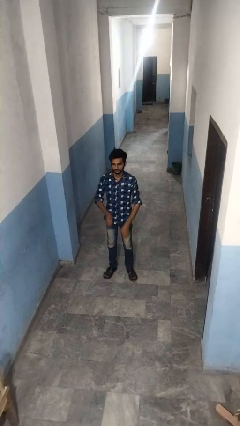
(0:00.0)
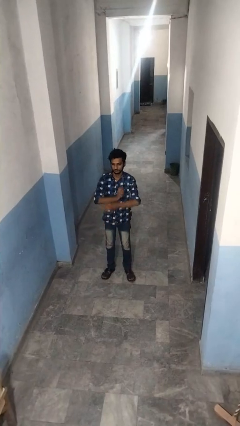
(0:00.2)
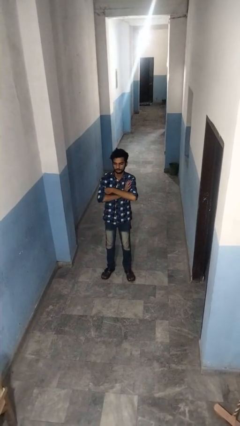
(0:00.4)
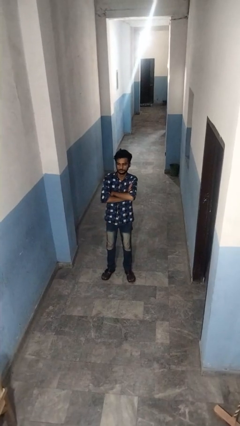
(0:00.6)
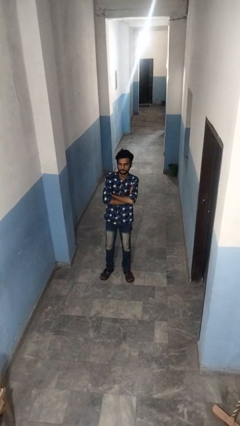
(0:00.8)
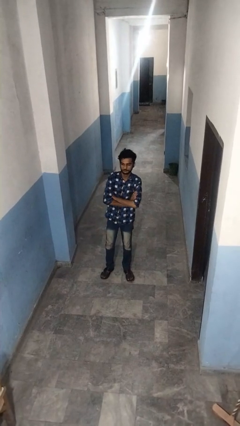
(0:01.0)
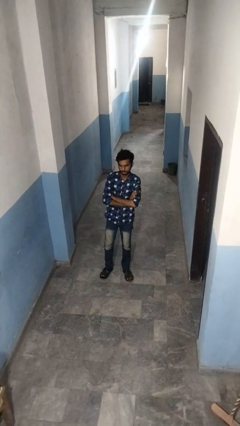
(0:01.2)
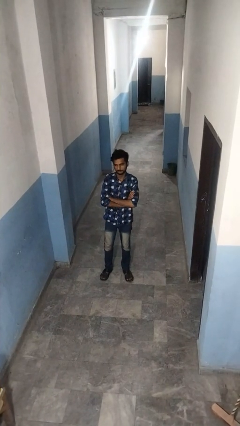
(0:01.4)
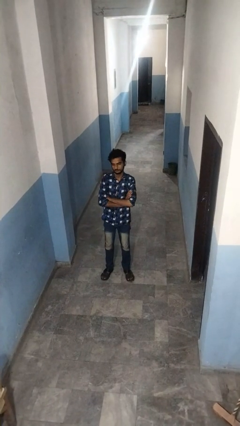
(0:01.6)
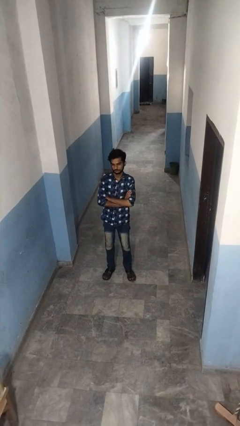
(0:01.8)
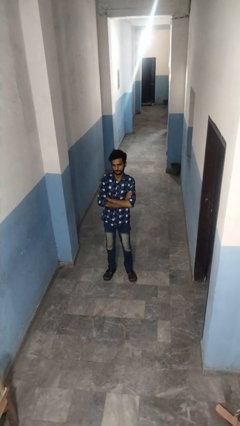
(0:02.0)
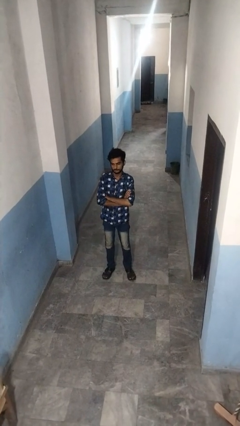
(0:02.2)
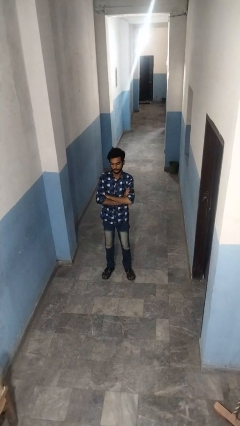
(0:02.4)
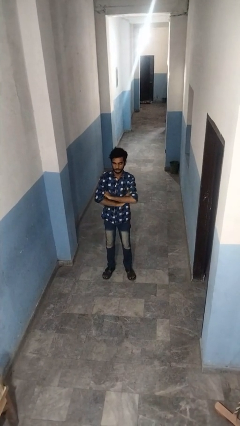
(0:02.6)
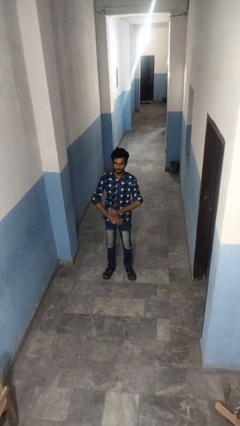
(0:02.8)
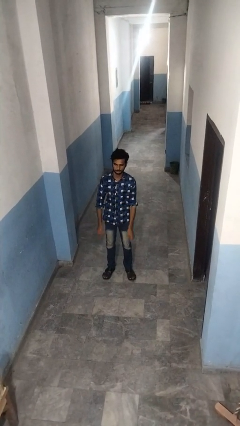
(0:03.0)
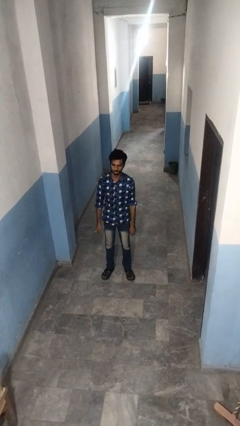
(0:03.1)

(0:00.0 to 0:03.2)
person crosses arms

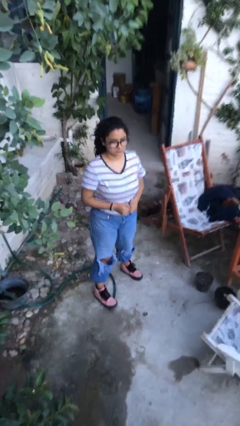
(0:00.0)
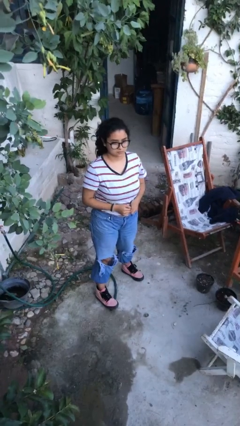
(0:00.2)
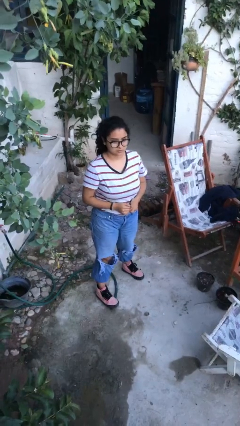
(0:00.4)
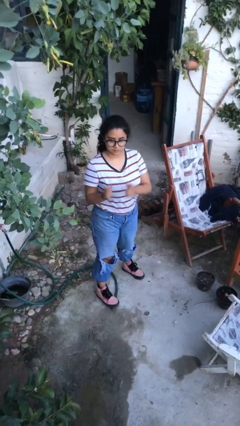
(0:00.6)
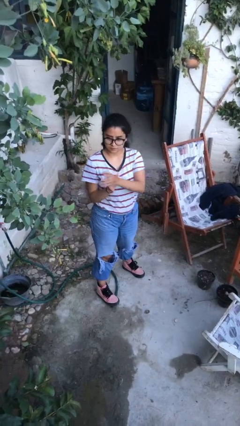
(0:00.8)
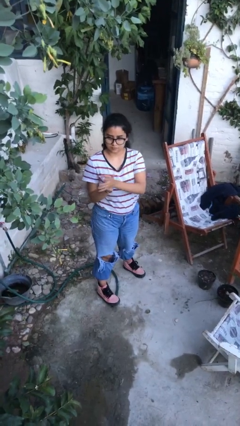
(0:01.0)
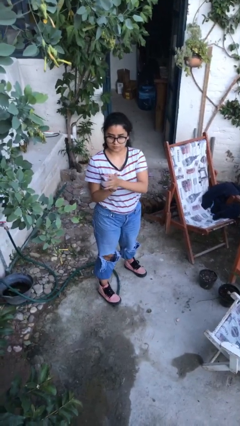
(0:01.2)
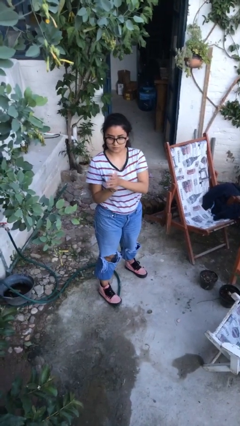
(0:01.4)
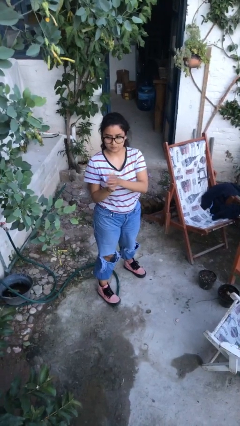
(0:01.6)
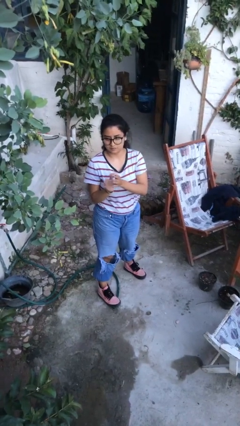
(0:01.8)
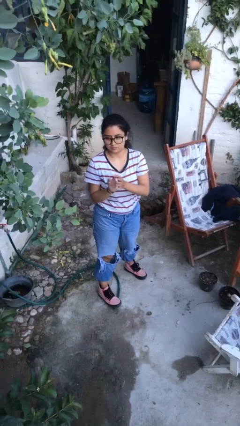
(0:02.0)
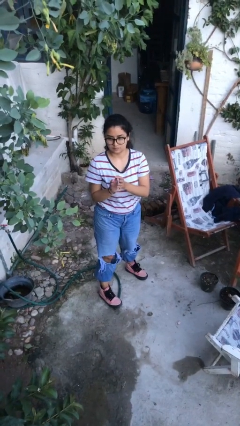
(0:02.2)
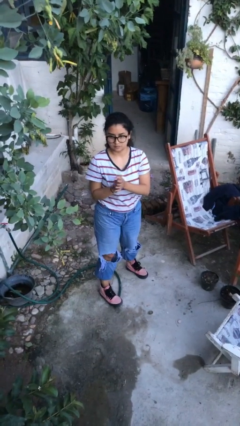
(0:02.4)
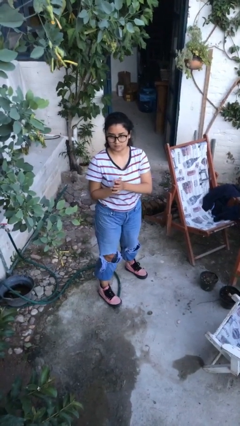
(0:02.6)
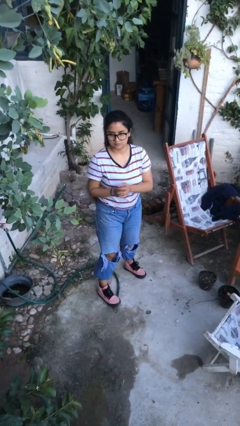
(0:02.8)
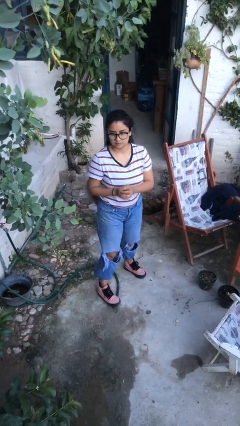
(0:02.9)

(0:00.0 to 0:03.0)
person claps hands

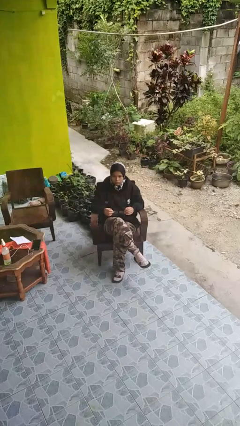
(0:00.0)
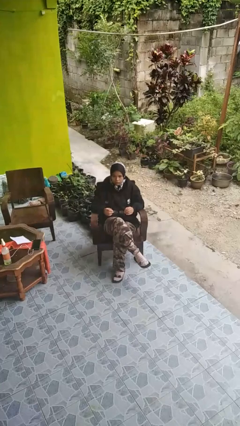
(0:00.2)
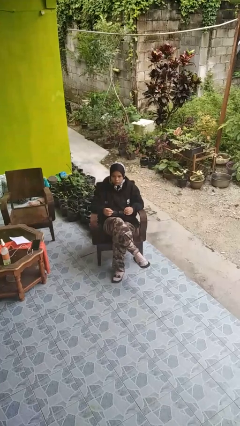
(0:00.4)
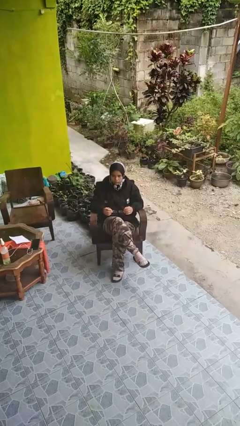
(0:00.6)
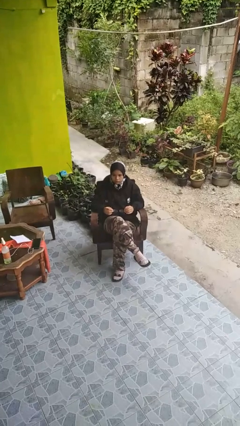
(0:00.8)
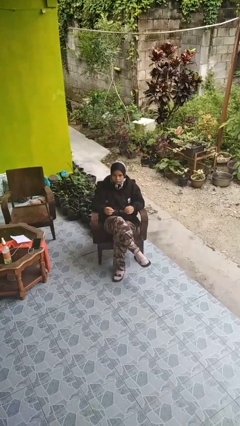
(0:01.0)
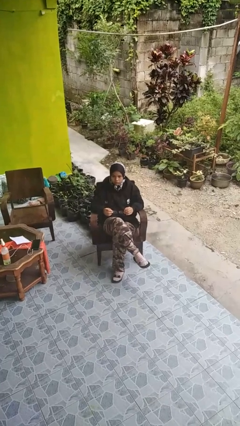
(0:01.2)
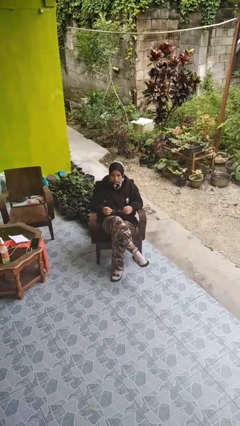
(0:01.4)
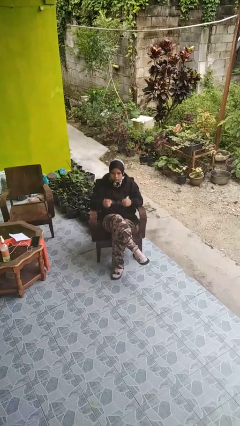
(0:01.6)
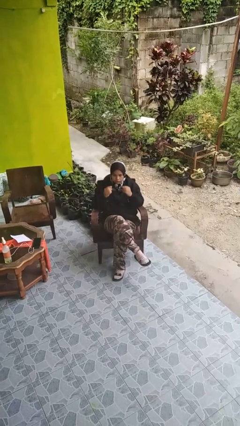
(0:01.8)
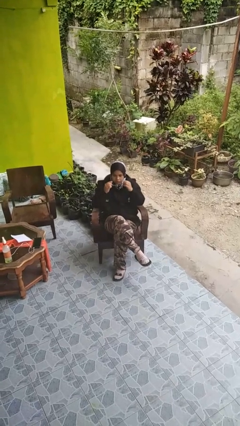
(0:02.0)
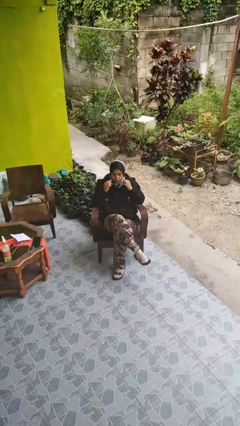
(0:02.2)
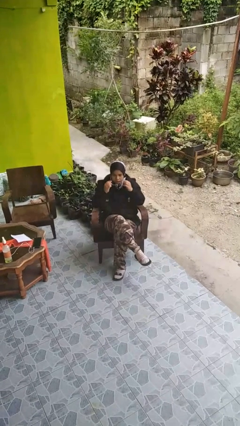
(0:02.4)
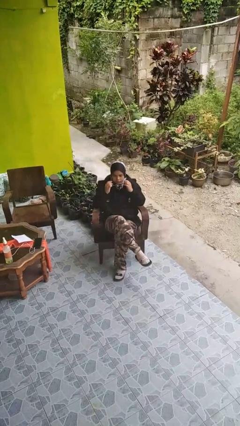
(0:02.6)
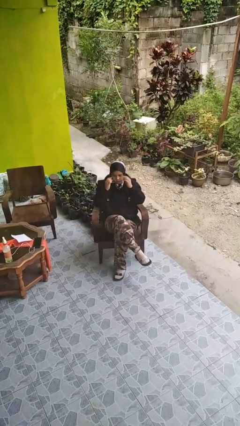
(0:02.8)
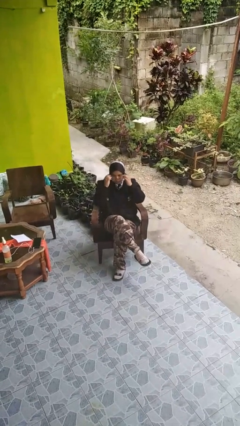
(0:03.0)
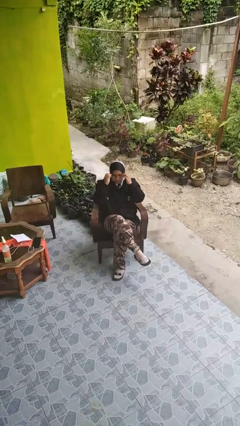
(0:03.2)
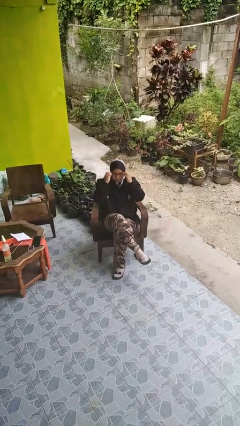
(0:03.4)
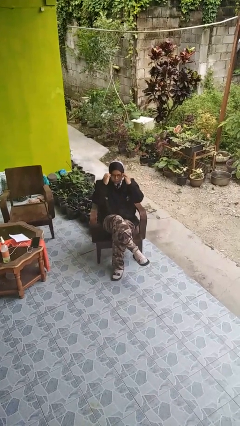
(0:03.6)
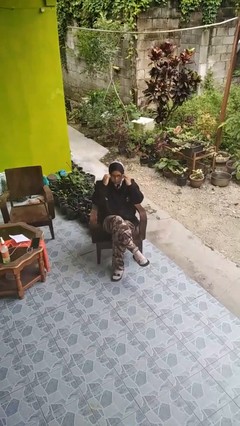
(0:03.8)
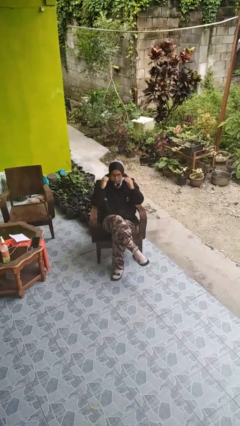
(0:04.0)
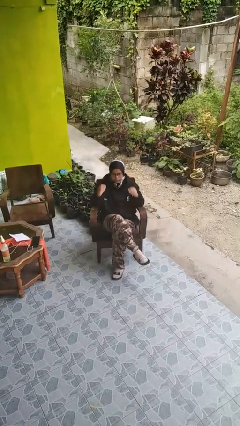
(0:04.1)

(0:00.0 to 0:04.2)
person puts on glasses

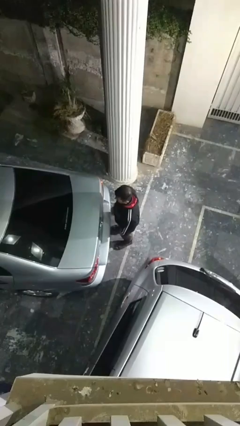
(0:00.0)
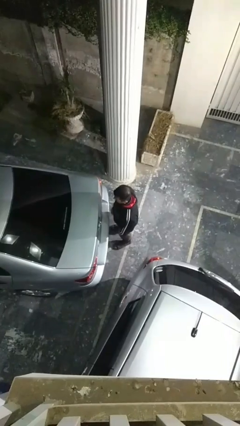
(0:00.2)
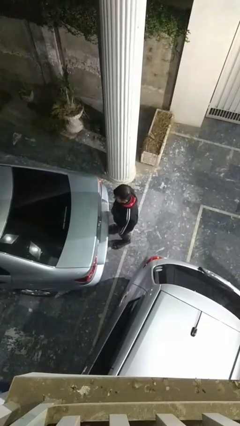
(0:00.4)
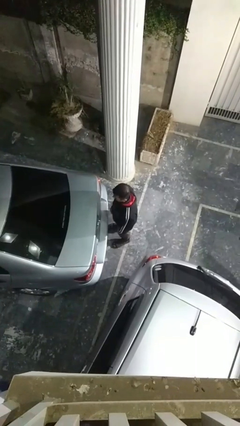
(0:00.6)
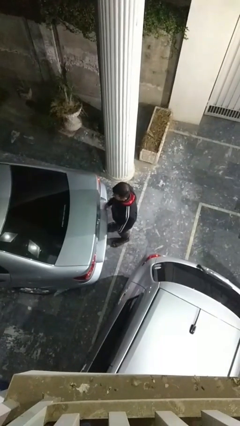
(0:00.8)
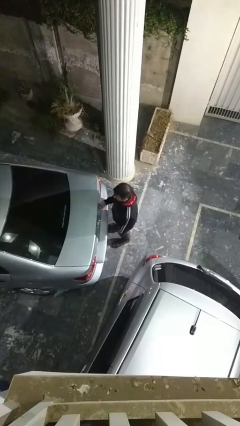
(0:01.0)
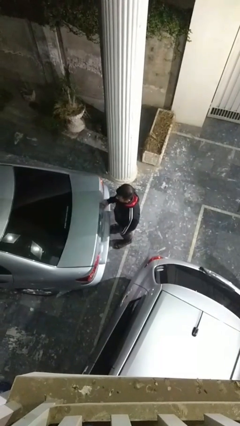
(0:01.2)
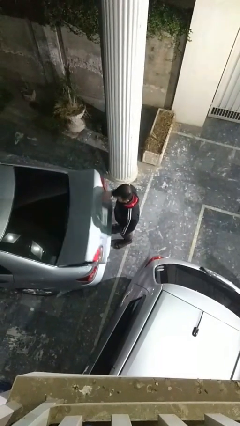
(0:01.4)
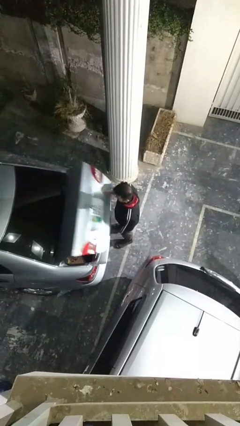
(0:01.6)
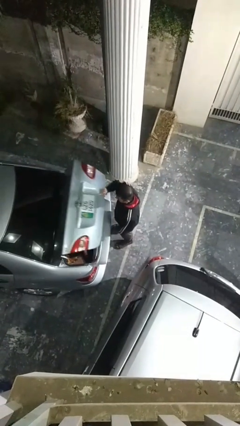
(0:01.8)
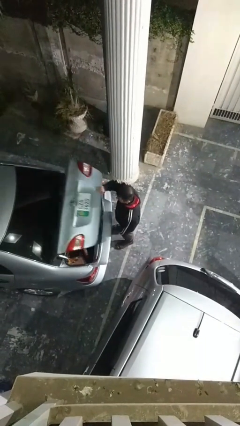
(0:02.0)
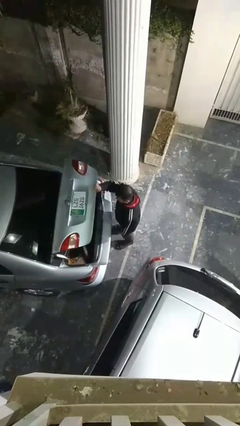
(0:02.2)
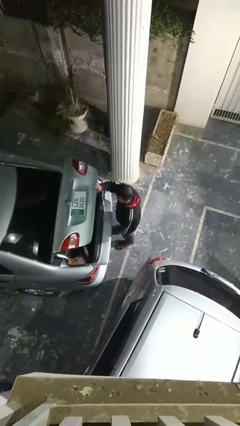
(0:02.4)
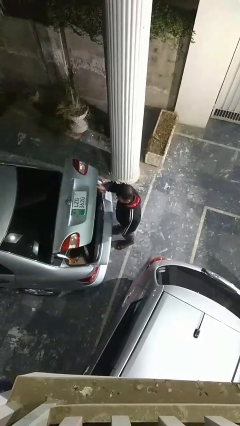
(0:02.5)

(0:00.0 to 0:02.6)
person opens car trunk

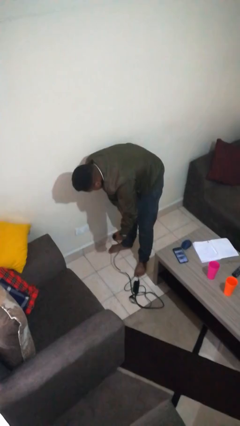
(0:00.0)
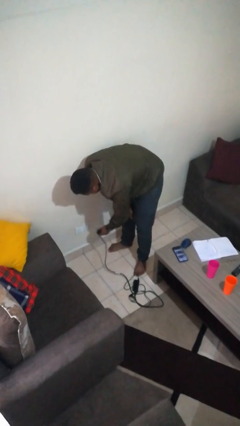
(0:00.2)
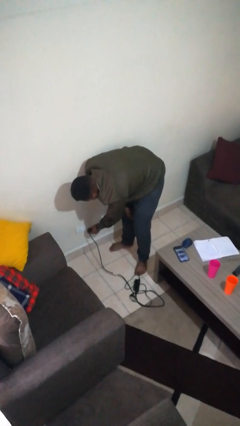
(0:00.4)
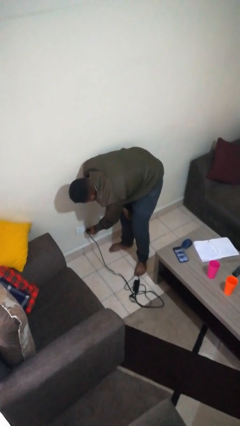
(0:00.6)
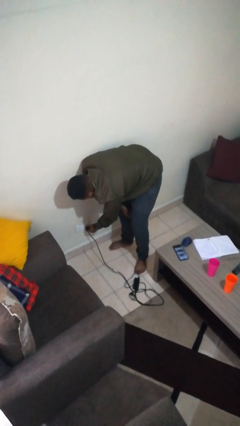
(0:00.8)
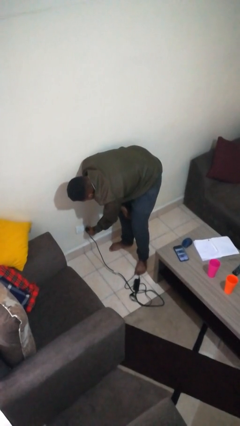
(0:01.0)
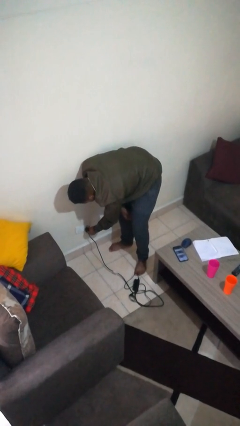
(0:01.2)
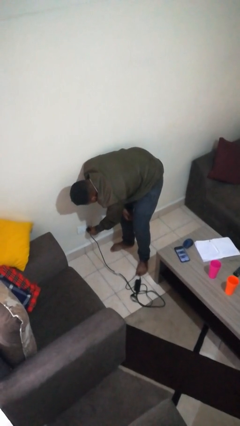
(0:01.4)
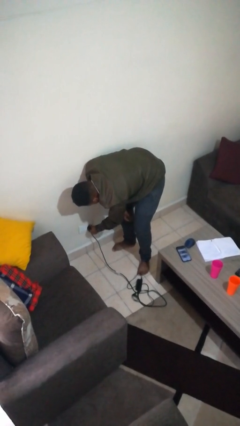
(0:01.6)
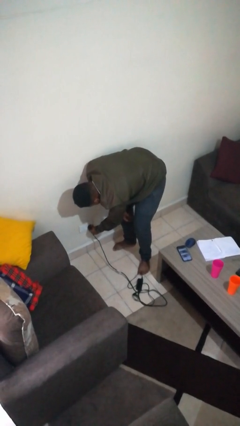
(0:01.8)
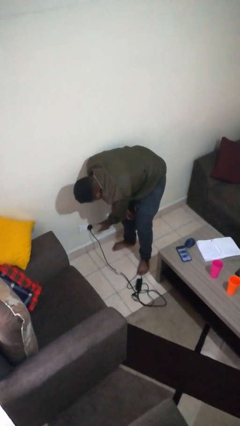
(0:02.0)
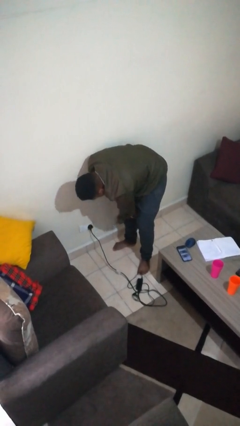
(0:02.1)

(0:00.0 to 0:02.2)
person plugs into electrical socket

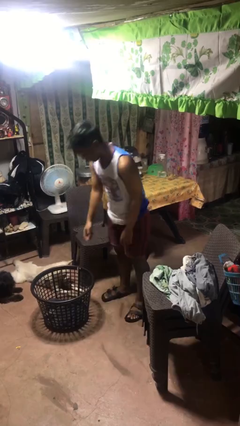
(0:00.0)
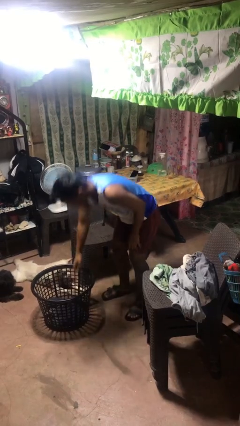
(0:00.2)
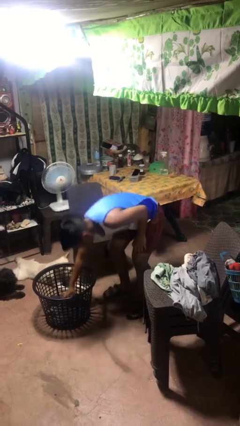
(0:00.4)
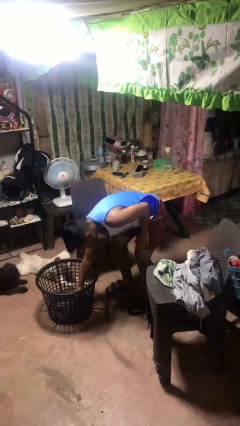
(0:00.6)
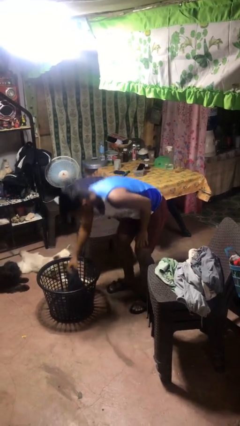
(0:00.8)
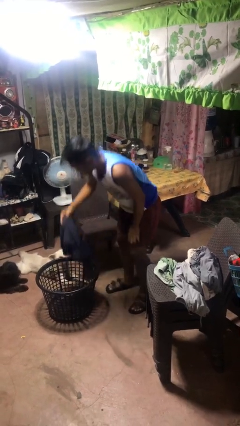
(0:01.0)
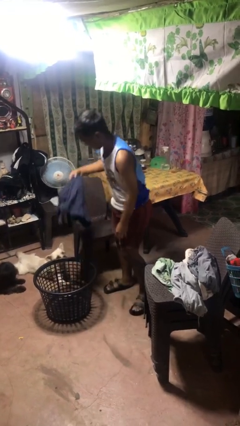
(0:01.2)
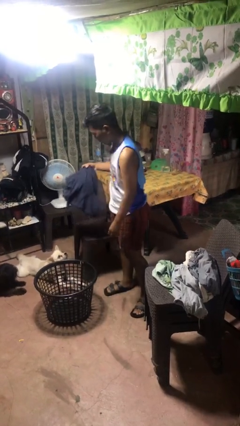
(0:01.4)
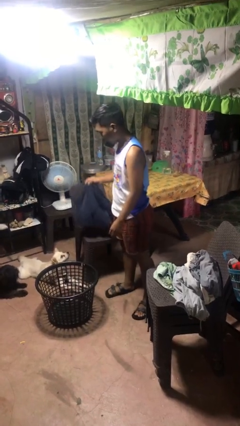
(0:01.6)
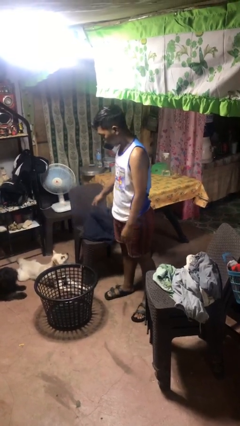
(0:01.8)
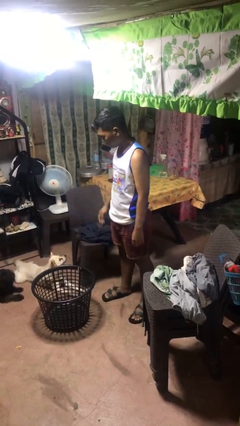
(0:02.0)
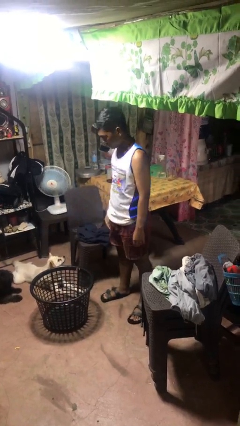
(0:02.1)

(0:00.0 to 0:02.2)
person takes object from basket

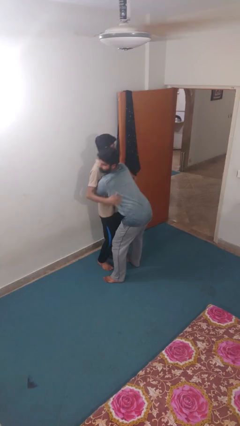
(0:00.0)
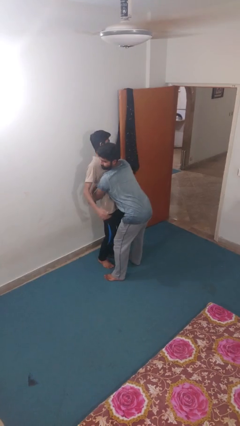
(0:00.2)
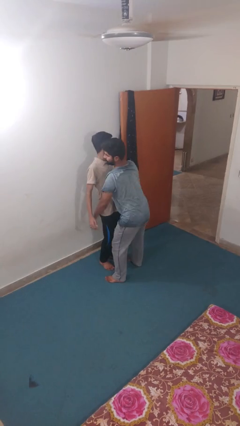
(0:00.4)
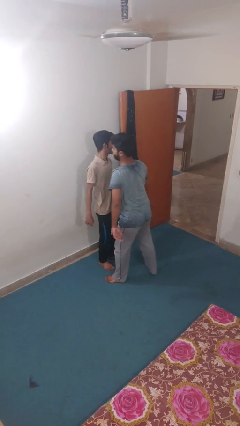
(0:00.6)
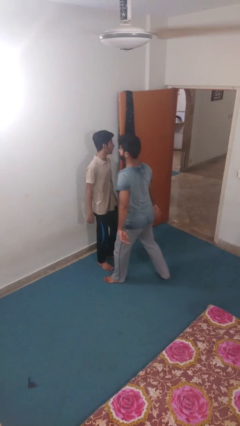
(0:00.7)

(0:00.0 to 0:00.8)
person puts down person
